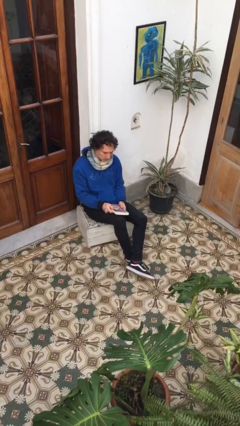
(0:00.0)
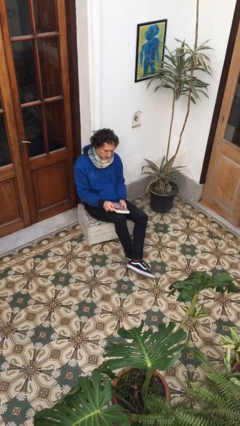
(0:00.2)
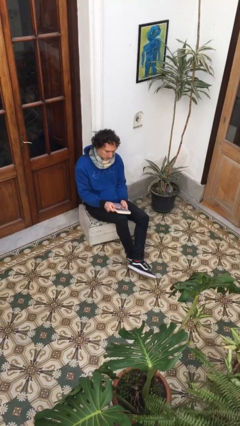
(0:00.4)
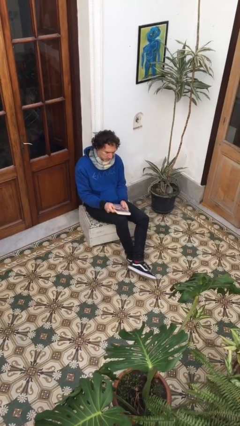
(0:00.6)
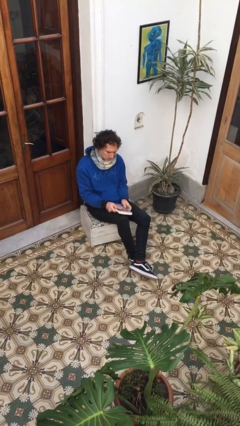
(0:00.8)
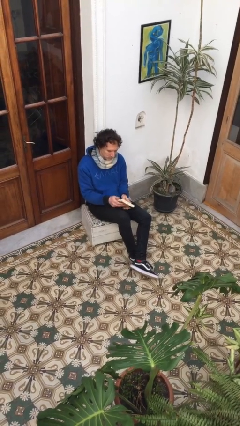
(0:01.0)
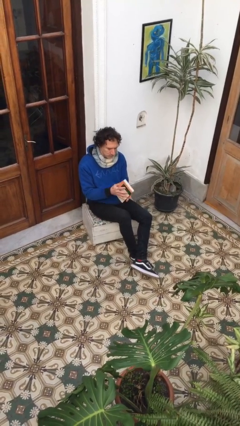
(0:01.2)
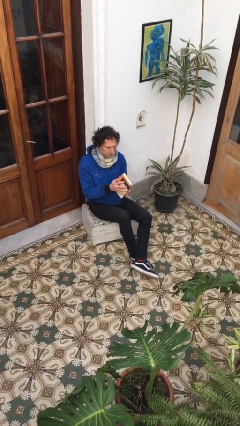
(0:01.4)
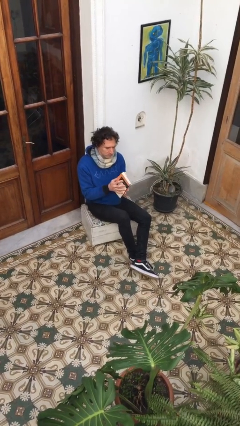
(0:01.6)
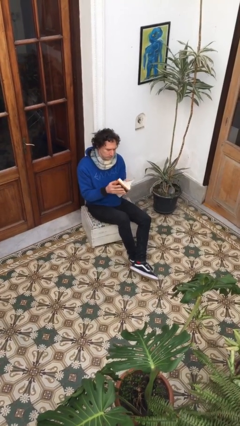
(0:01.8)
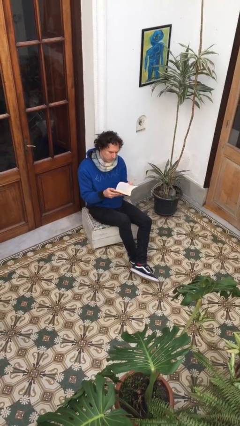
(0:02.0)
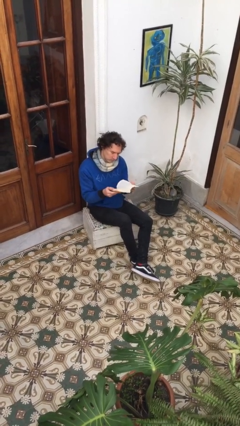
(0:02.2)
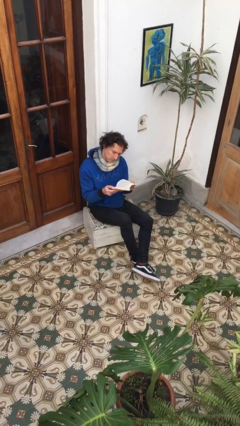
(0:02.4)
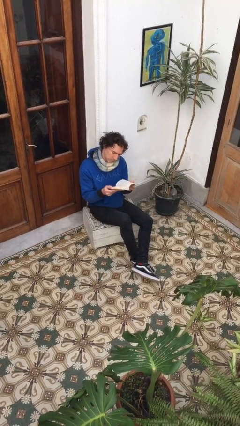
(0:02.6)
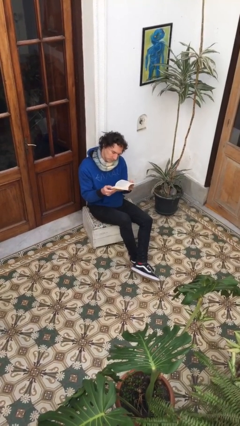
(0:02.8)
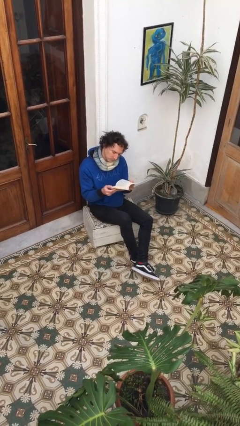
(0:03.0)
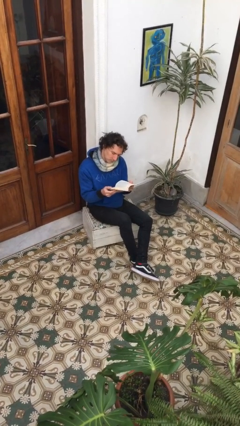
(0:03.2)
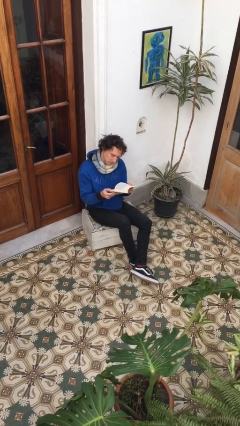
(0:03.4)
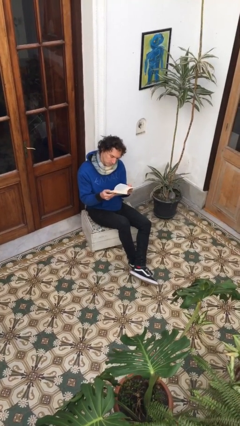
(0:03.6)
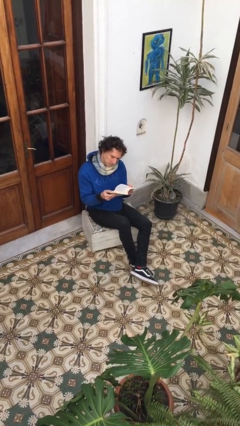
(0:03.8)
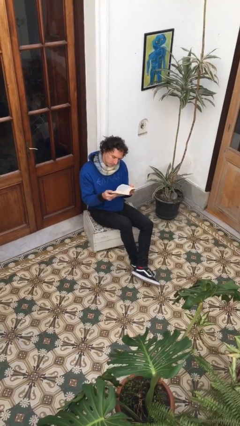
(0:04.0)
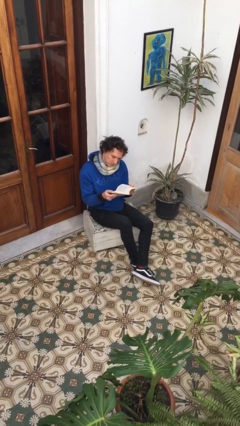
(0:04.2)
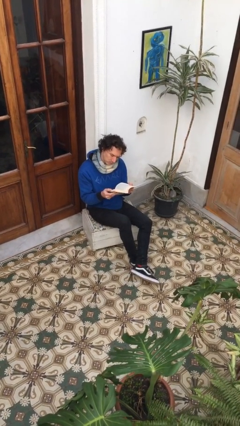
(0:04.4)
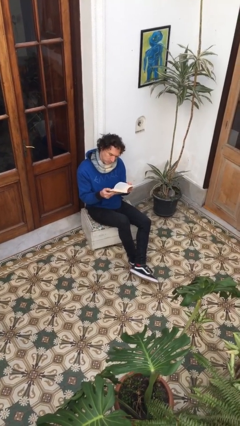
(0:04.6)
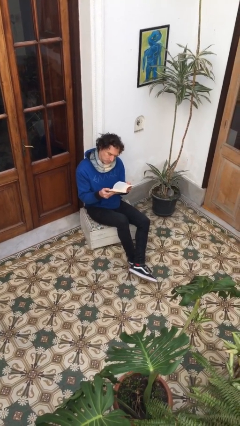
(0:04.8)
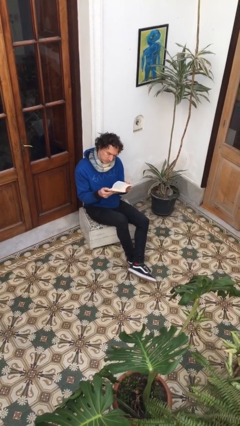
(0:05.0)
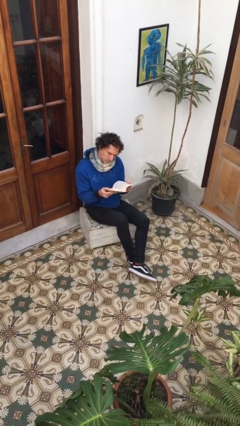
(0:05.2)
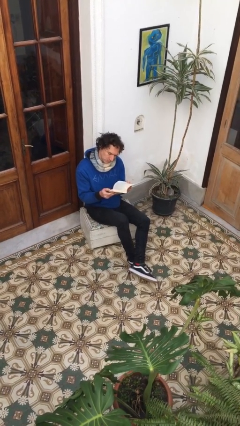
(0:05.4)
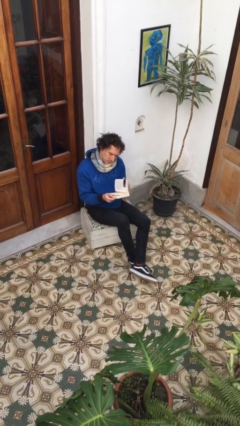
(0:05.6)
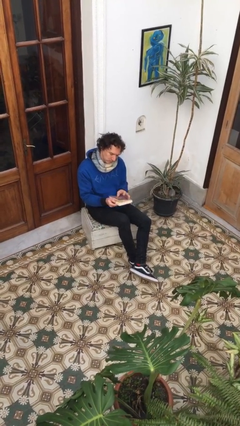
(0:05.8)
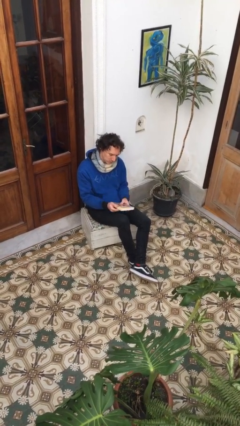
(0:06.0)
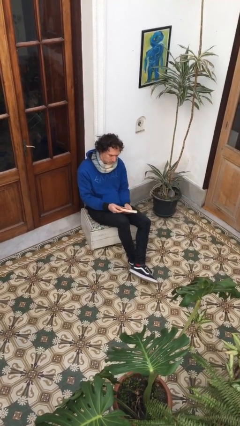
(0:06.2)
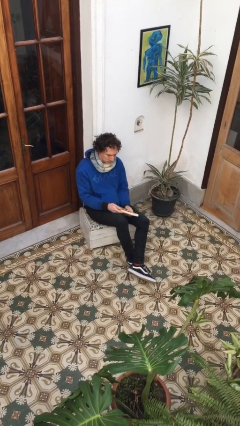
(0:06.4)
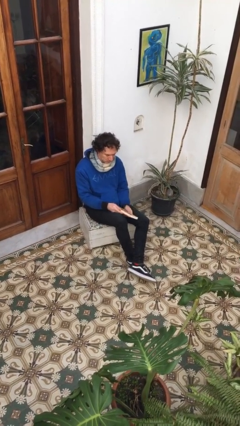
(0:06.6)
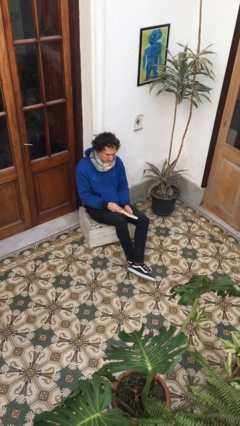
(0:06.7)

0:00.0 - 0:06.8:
person reads book

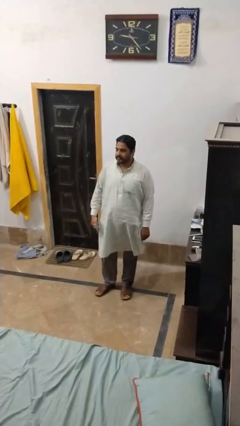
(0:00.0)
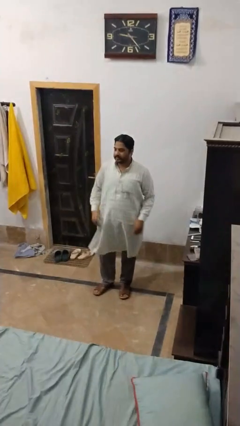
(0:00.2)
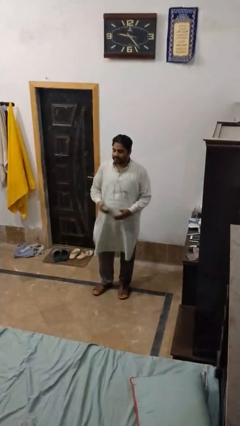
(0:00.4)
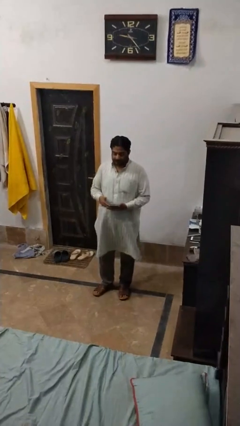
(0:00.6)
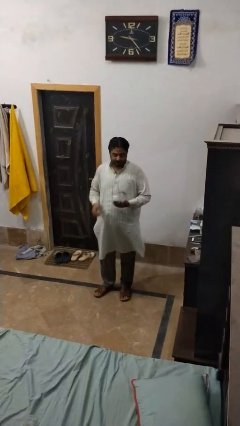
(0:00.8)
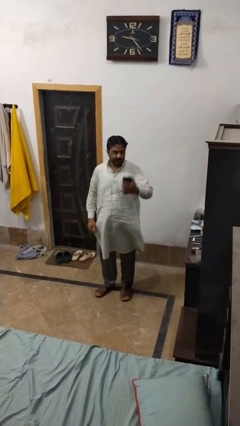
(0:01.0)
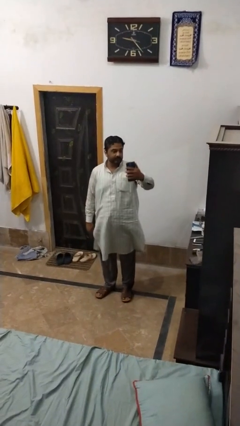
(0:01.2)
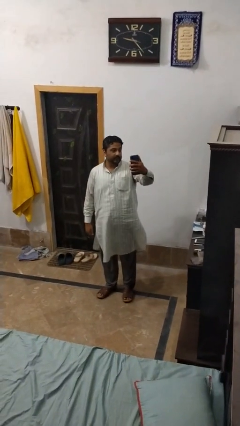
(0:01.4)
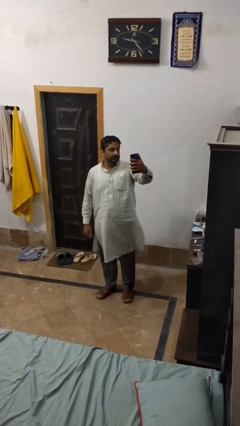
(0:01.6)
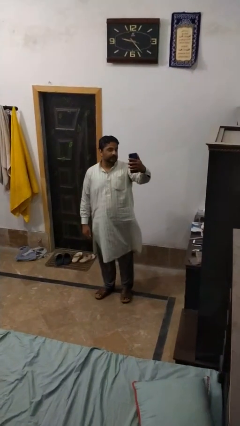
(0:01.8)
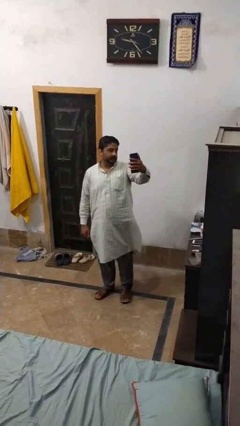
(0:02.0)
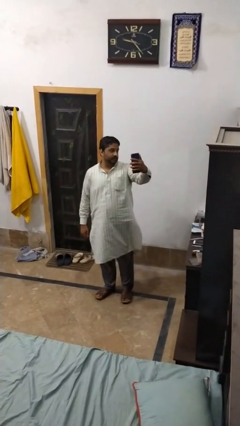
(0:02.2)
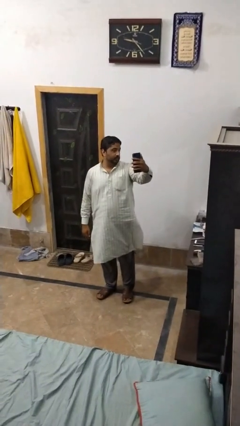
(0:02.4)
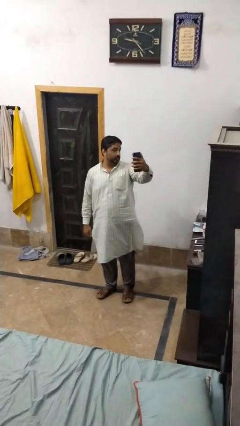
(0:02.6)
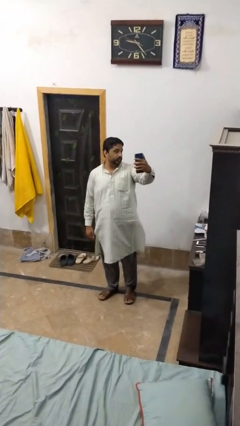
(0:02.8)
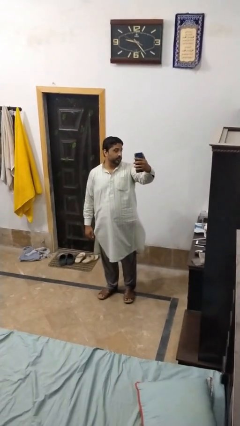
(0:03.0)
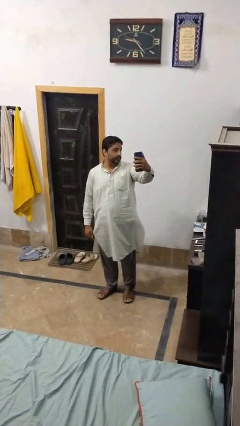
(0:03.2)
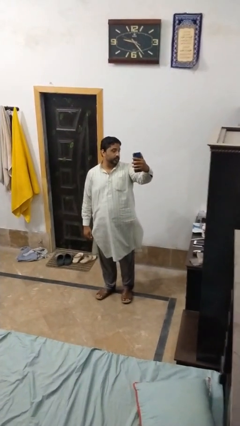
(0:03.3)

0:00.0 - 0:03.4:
person takes selfie

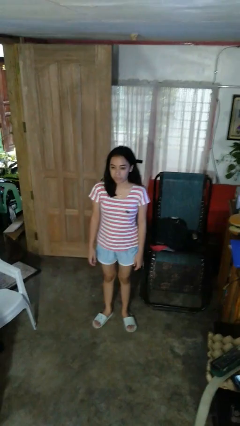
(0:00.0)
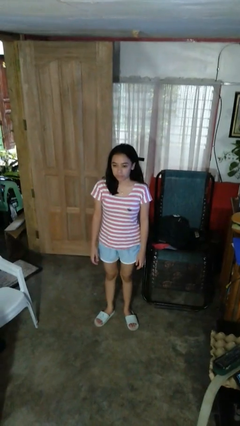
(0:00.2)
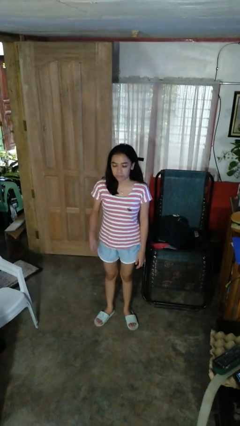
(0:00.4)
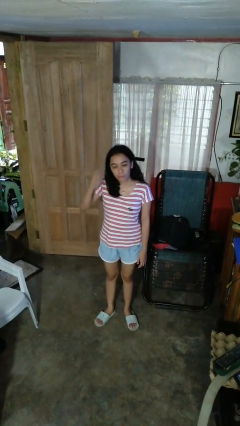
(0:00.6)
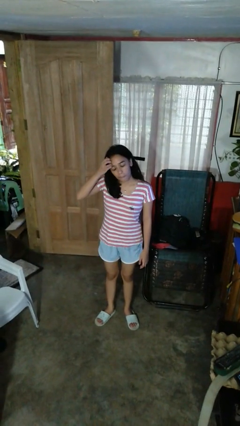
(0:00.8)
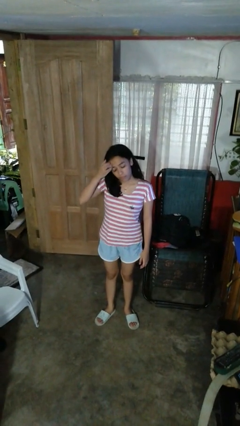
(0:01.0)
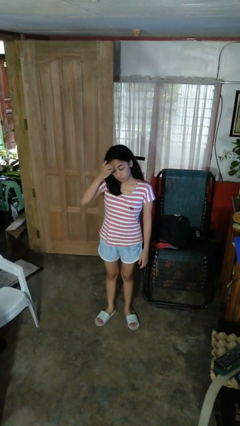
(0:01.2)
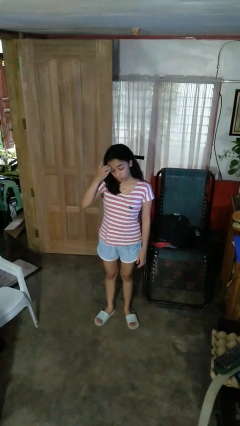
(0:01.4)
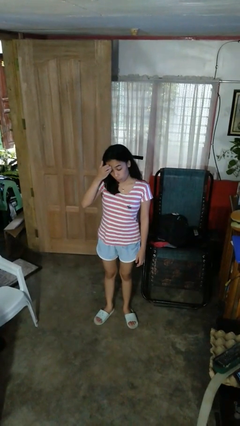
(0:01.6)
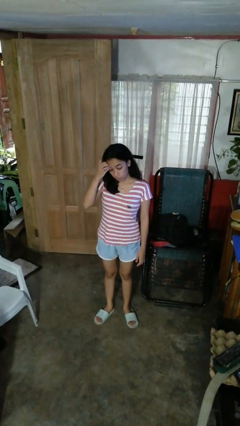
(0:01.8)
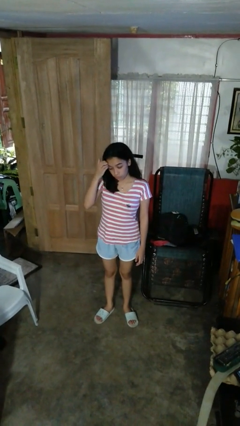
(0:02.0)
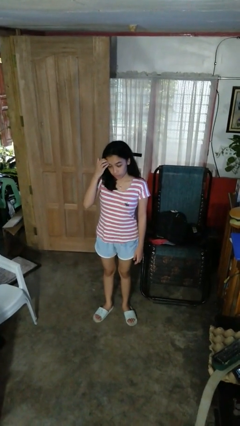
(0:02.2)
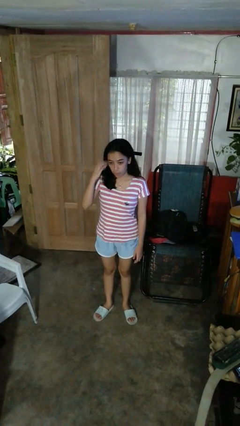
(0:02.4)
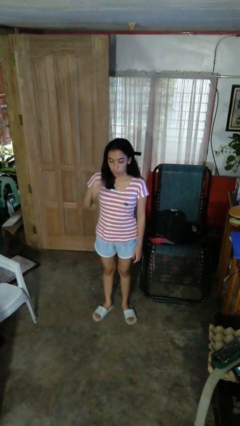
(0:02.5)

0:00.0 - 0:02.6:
person scratches face

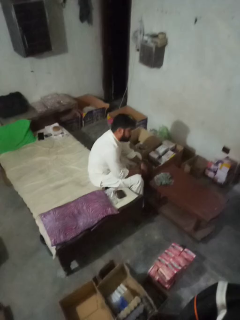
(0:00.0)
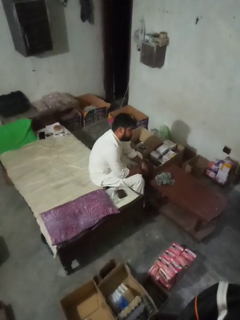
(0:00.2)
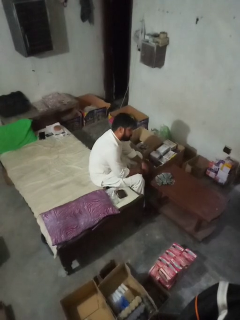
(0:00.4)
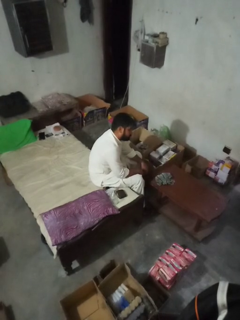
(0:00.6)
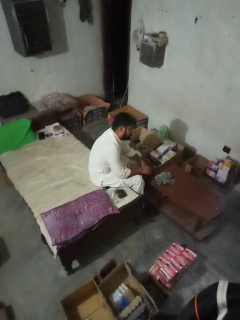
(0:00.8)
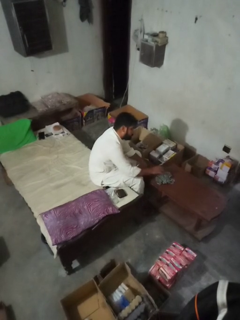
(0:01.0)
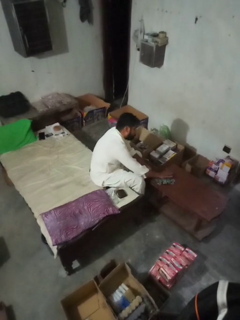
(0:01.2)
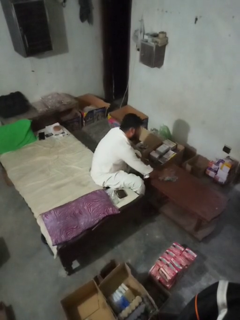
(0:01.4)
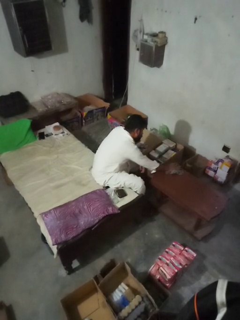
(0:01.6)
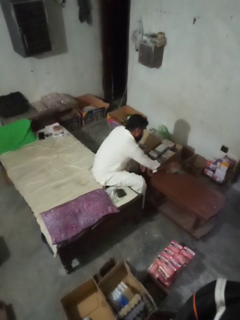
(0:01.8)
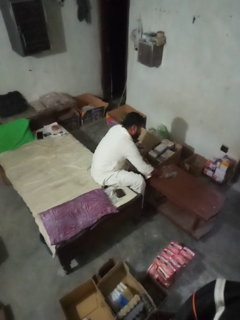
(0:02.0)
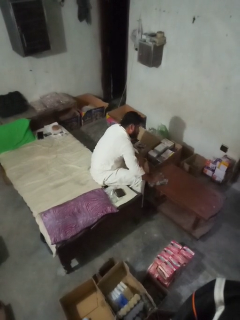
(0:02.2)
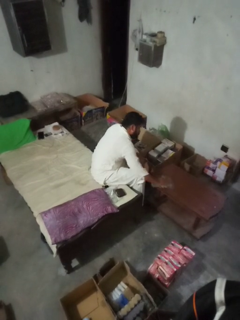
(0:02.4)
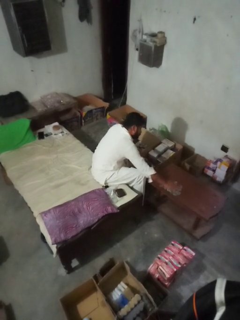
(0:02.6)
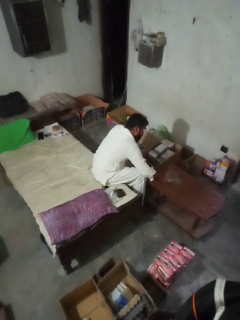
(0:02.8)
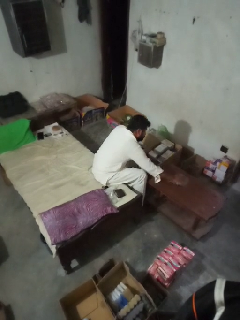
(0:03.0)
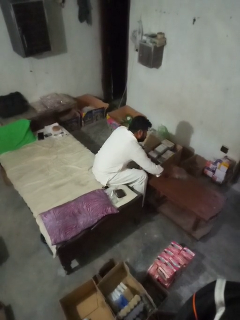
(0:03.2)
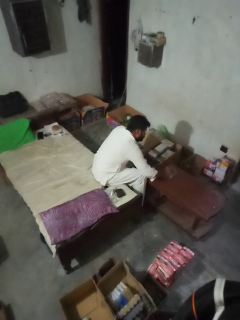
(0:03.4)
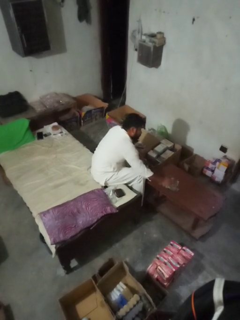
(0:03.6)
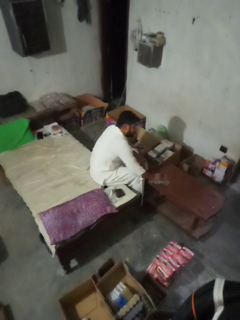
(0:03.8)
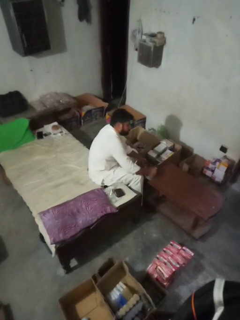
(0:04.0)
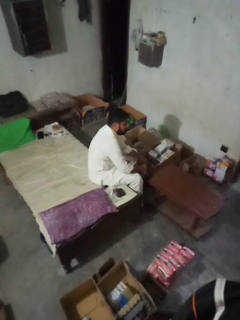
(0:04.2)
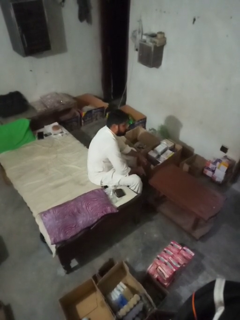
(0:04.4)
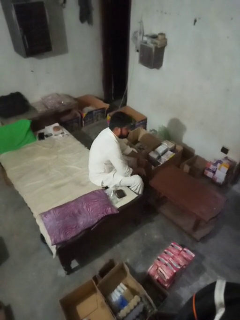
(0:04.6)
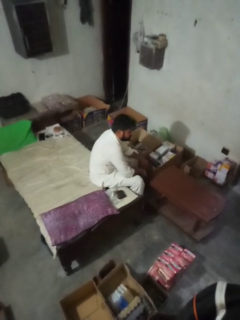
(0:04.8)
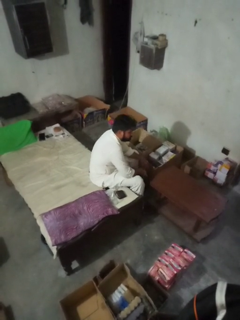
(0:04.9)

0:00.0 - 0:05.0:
person cleans table with rag

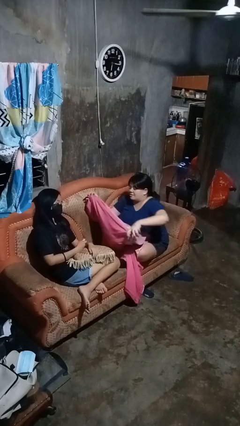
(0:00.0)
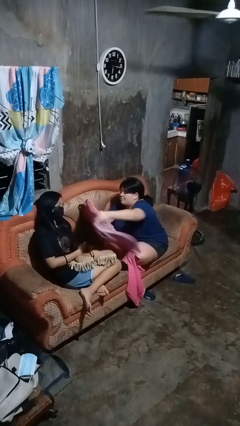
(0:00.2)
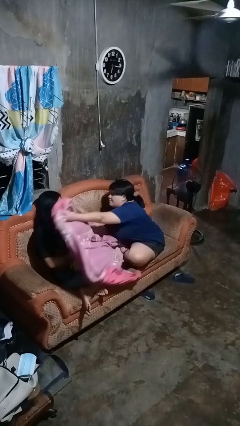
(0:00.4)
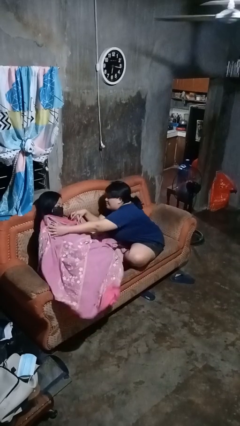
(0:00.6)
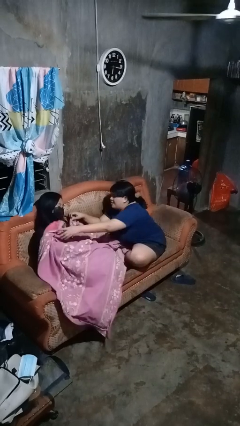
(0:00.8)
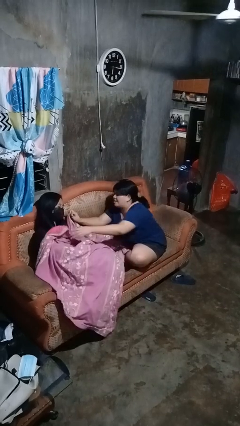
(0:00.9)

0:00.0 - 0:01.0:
person covers friend with blanket

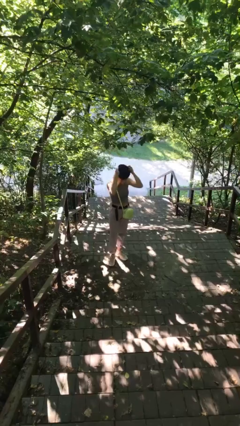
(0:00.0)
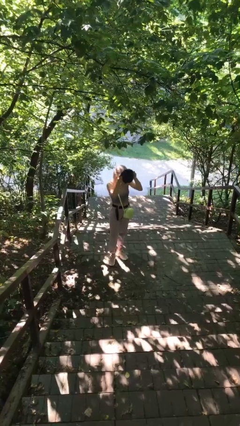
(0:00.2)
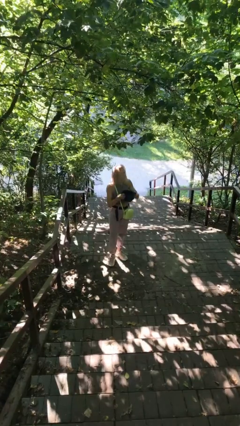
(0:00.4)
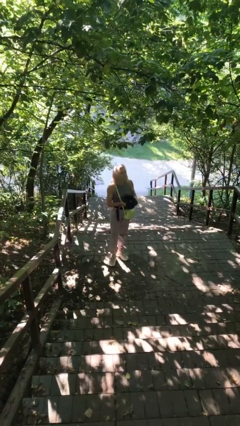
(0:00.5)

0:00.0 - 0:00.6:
person takes off hat
